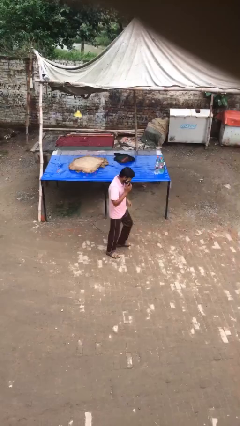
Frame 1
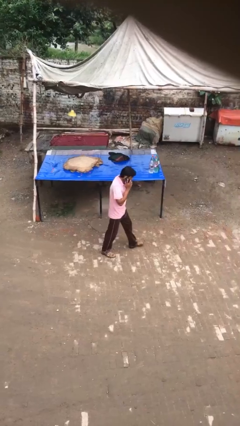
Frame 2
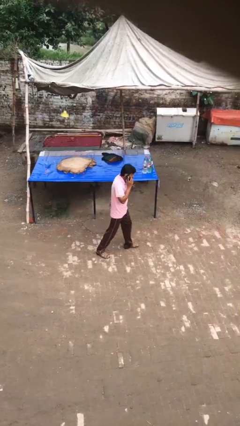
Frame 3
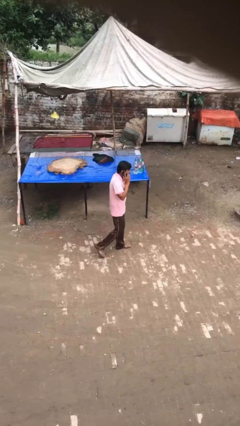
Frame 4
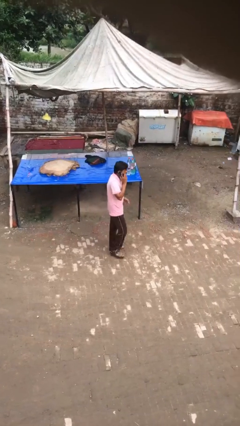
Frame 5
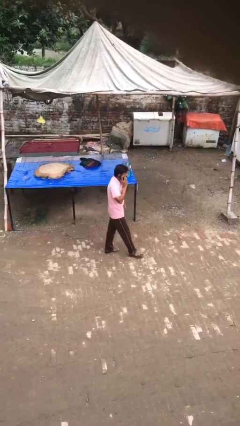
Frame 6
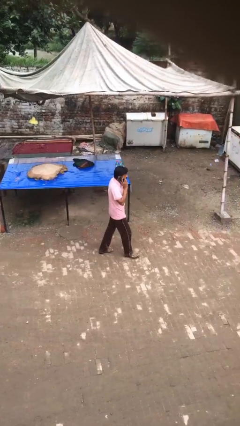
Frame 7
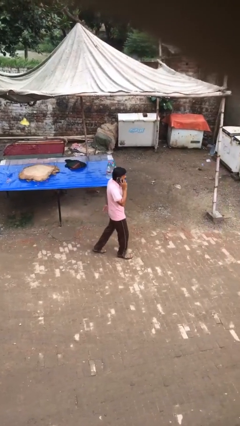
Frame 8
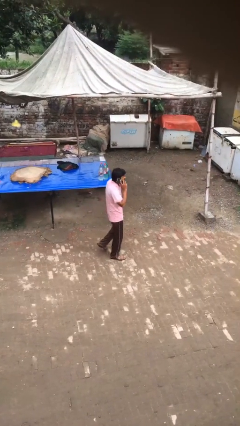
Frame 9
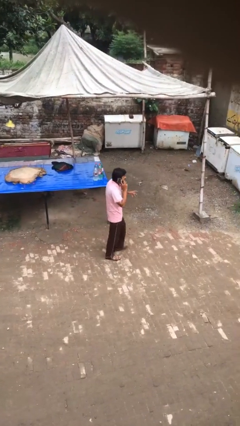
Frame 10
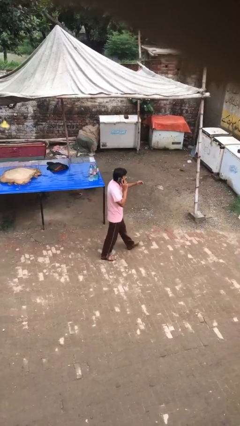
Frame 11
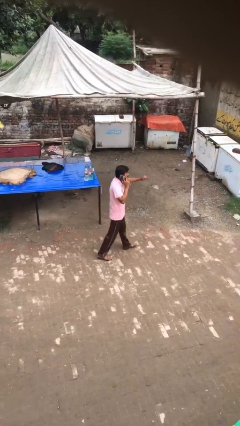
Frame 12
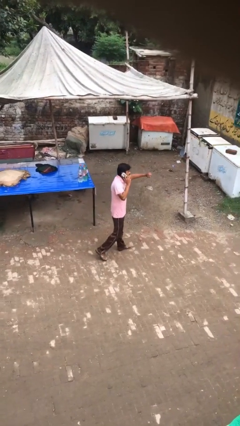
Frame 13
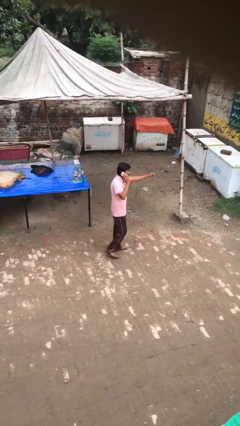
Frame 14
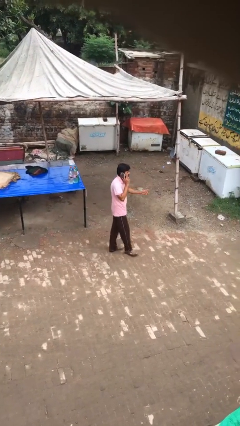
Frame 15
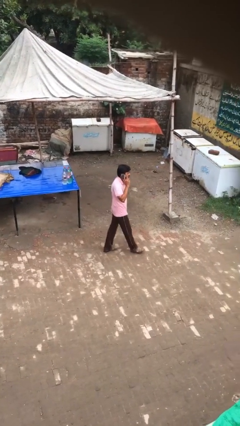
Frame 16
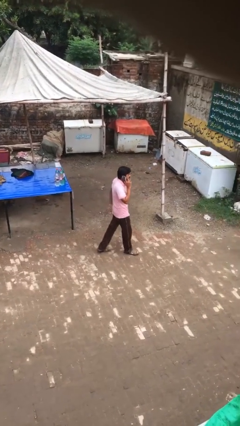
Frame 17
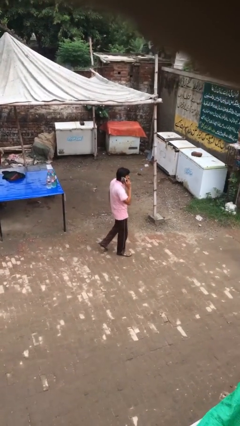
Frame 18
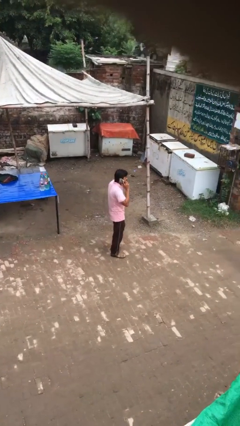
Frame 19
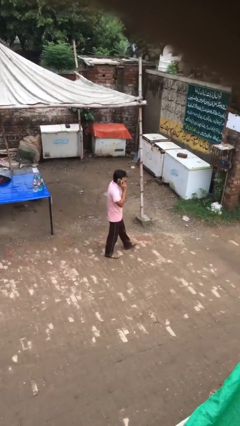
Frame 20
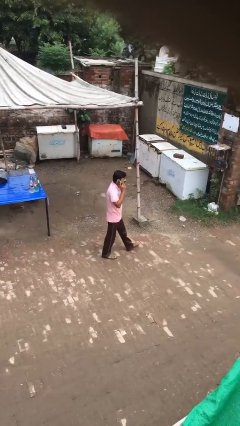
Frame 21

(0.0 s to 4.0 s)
person talks on phone

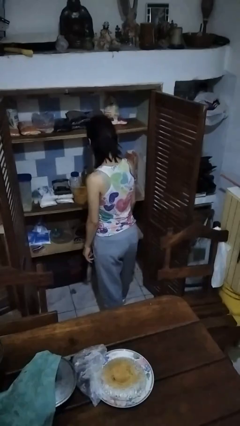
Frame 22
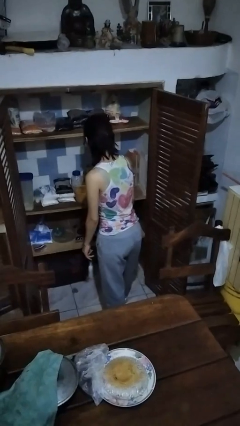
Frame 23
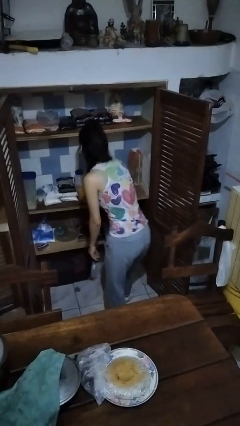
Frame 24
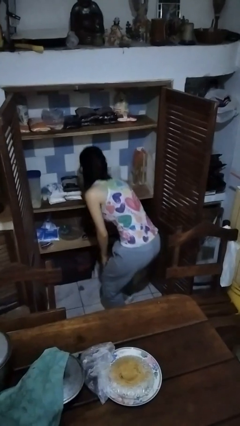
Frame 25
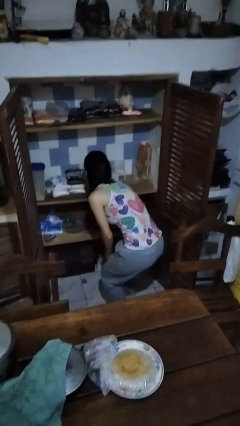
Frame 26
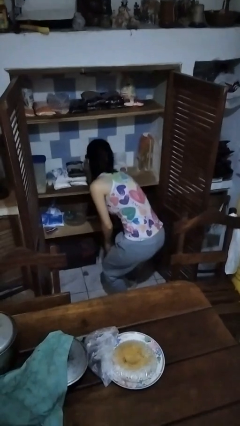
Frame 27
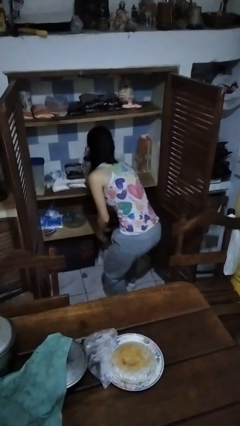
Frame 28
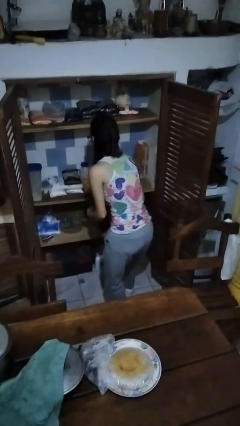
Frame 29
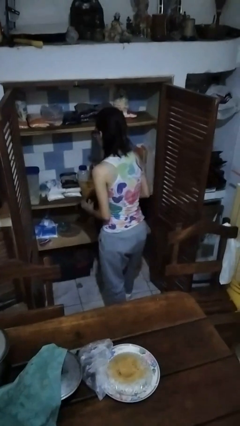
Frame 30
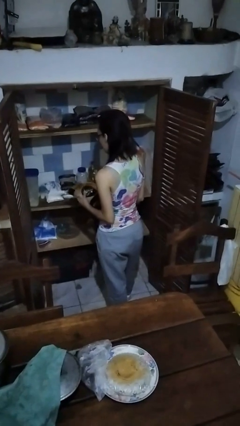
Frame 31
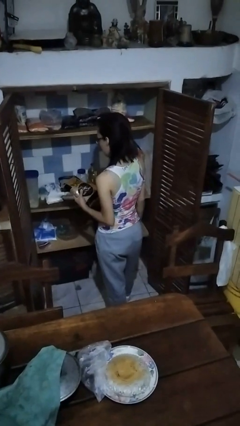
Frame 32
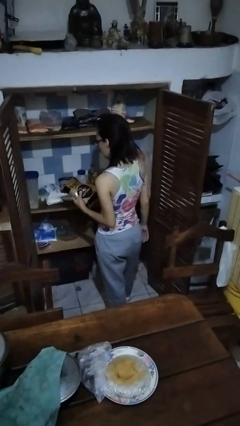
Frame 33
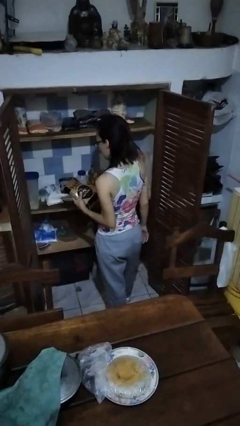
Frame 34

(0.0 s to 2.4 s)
person takes object from cabinet

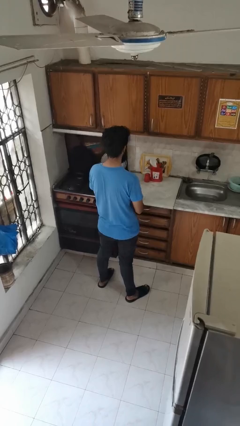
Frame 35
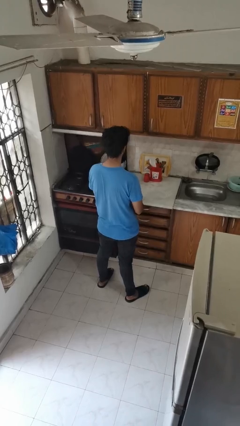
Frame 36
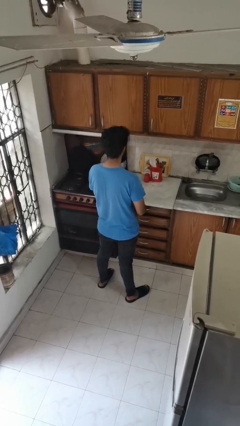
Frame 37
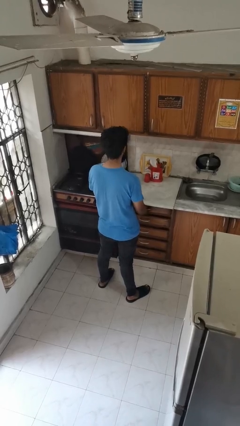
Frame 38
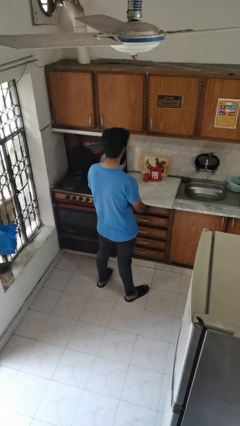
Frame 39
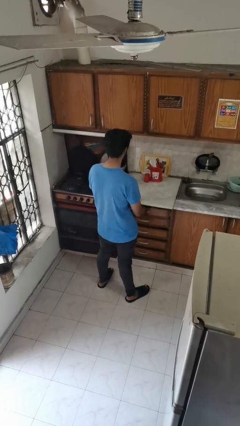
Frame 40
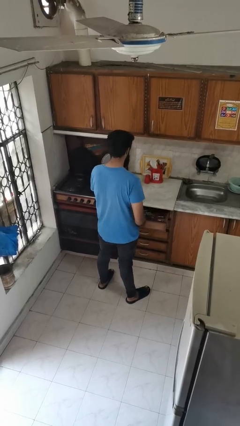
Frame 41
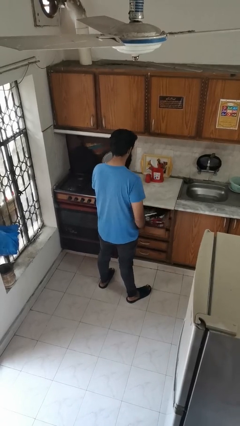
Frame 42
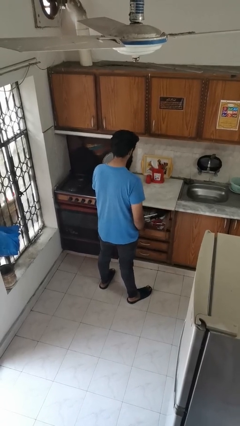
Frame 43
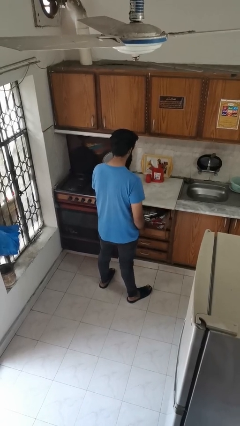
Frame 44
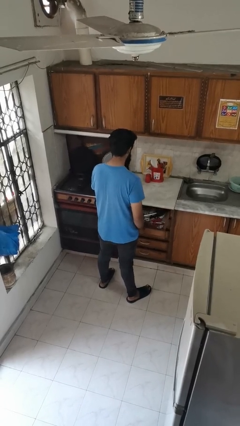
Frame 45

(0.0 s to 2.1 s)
person opens kitchen drawer

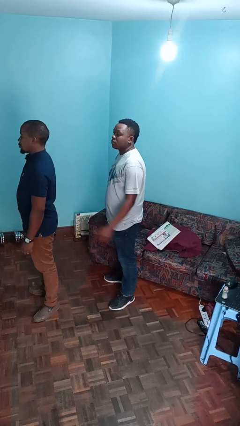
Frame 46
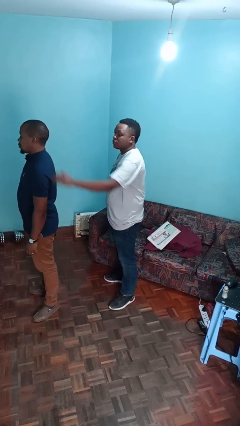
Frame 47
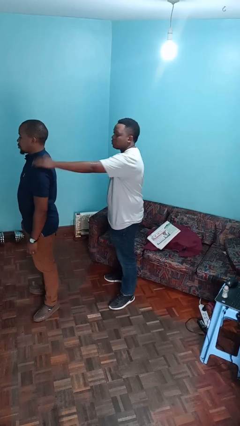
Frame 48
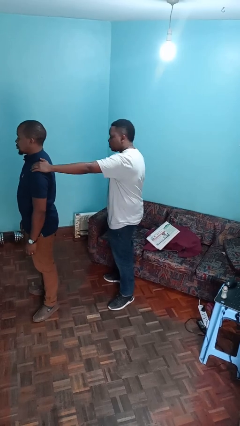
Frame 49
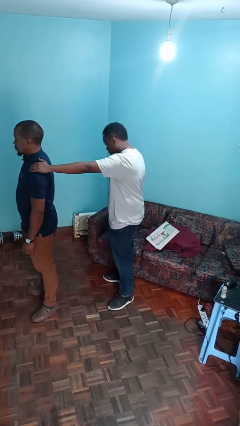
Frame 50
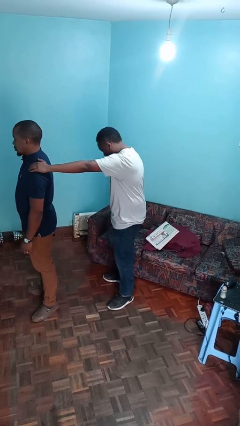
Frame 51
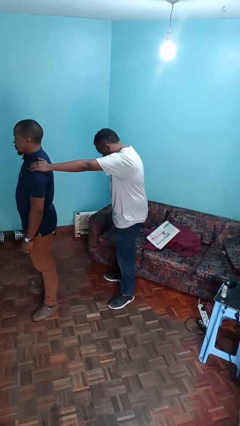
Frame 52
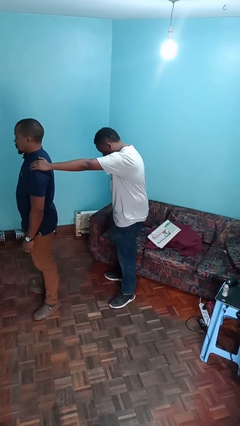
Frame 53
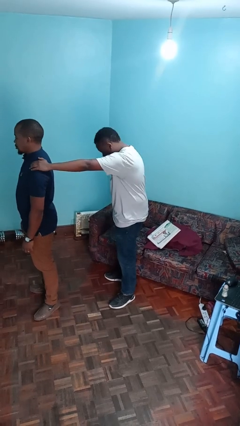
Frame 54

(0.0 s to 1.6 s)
person grabs person by shoulder

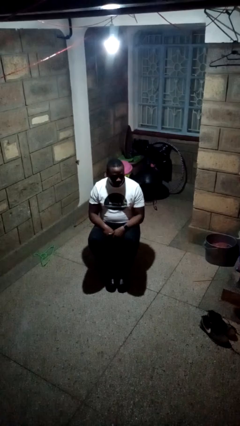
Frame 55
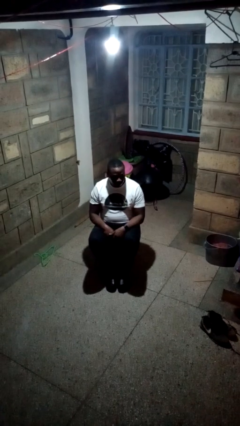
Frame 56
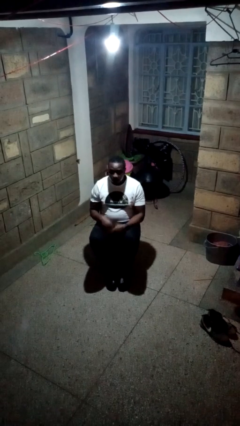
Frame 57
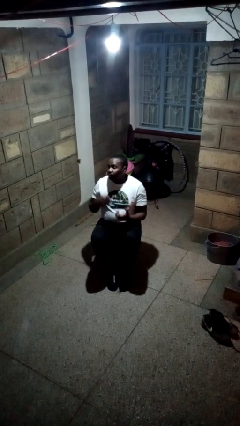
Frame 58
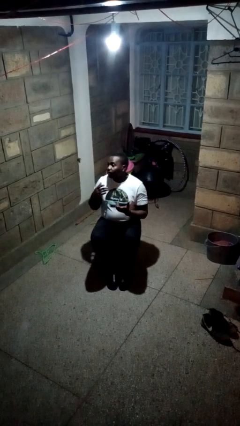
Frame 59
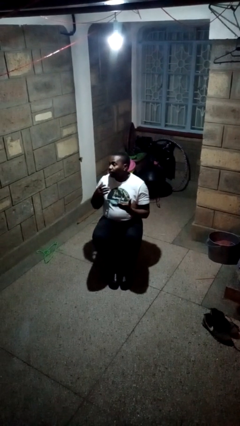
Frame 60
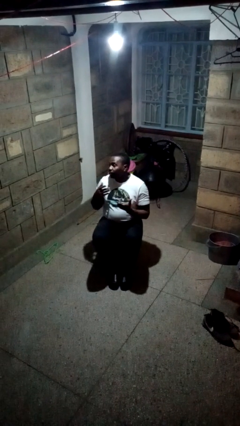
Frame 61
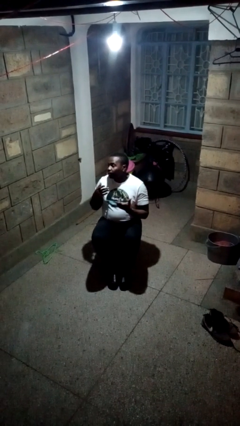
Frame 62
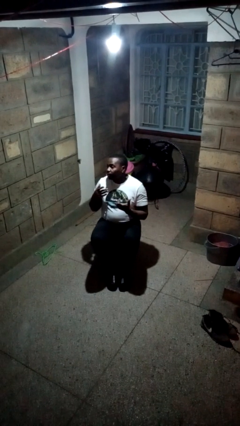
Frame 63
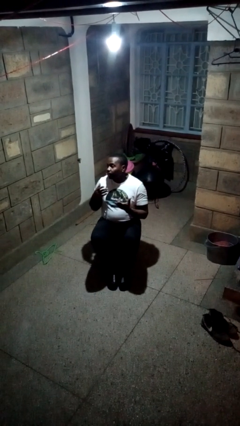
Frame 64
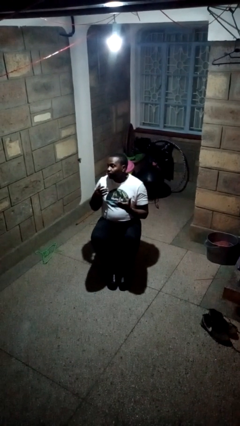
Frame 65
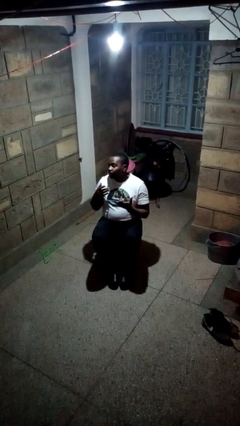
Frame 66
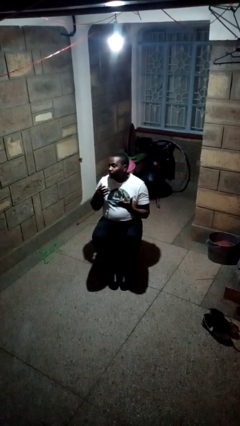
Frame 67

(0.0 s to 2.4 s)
person shrugs

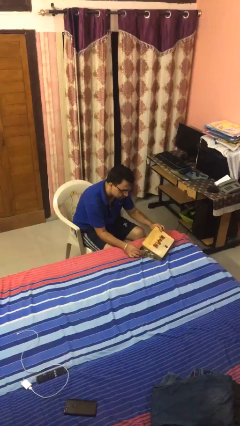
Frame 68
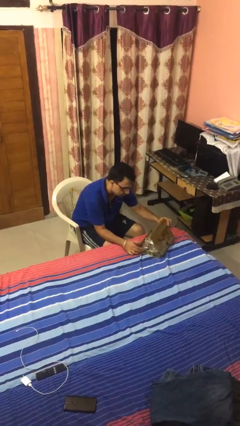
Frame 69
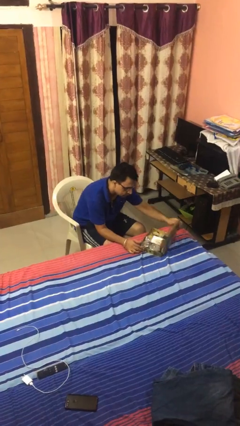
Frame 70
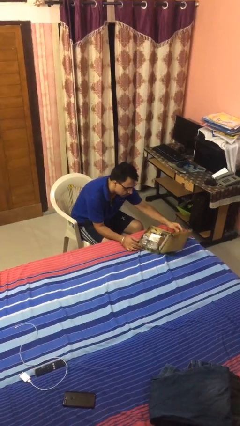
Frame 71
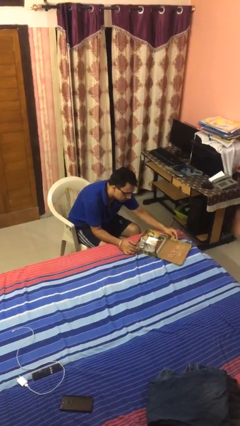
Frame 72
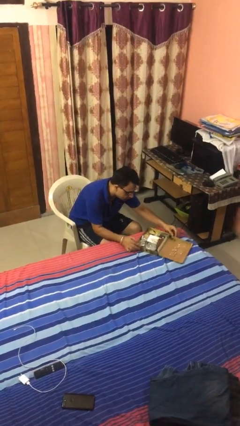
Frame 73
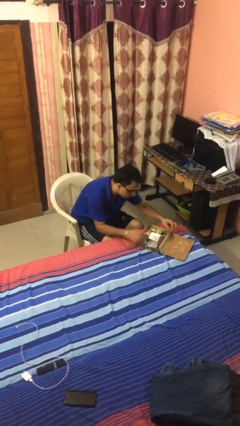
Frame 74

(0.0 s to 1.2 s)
person opens jewelry box

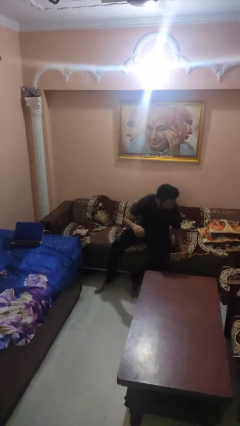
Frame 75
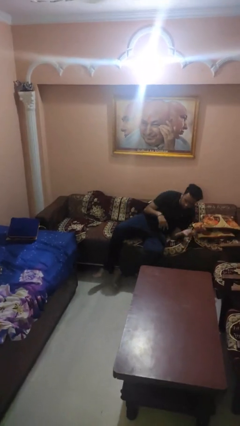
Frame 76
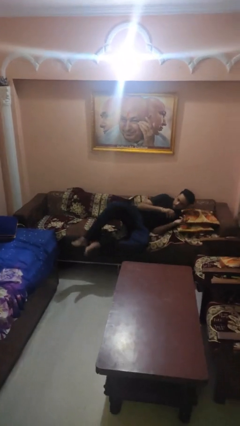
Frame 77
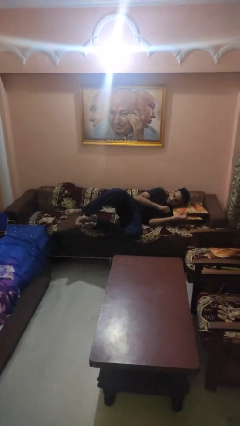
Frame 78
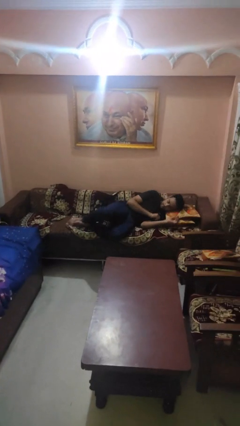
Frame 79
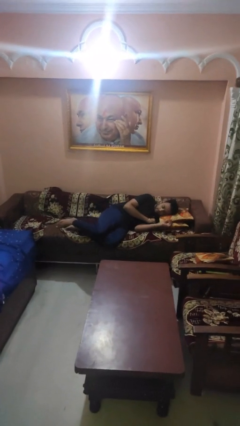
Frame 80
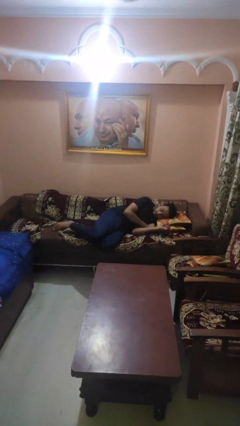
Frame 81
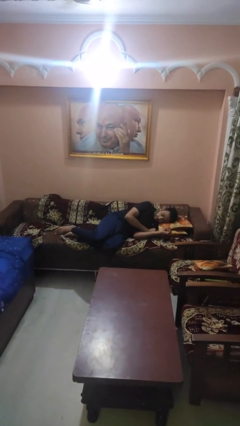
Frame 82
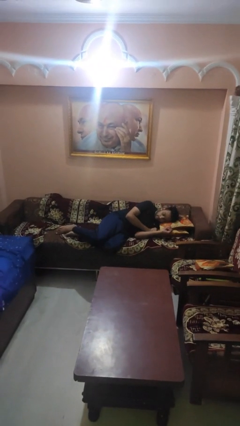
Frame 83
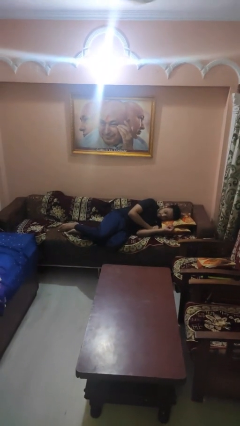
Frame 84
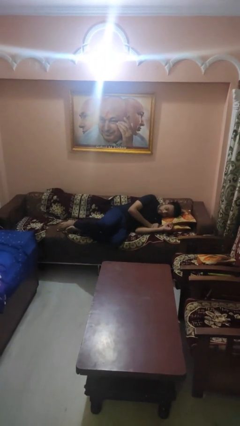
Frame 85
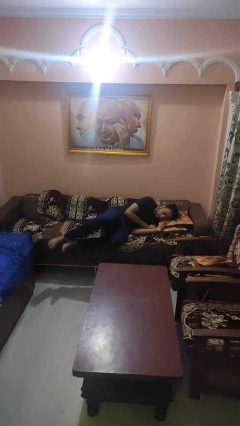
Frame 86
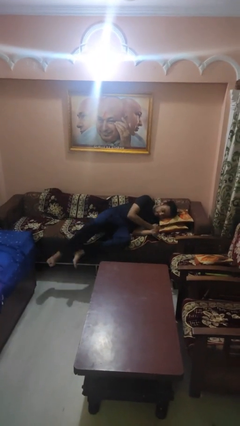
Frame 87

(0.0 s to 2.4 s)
person lies down on couch

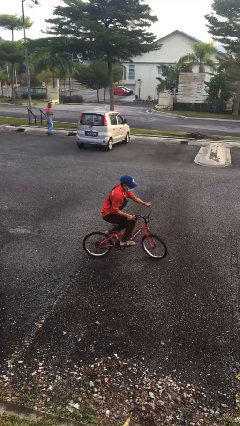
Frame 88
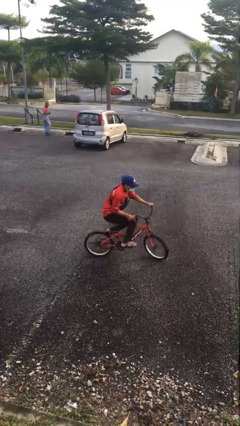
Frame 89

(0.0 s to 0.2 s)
person rides bicycle
